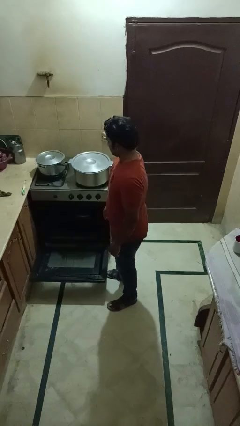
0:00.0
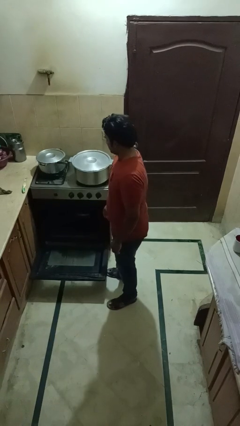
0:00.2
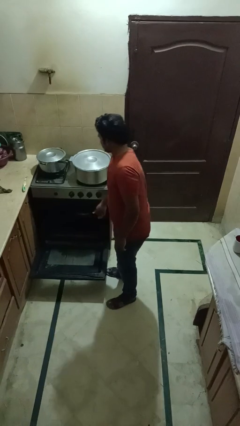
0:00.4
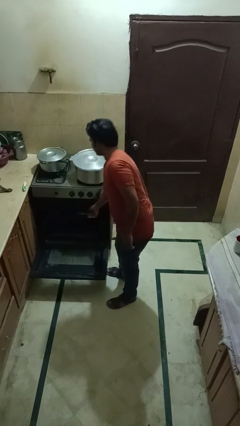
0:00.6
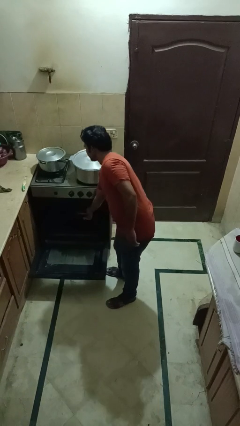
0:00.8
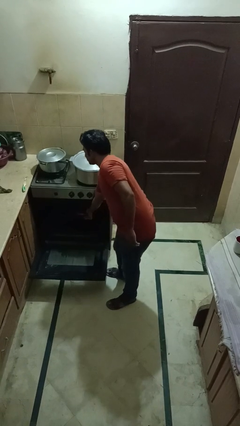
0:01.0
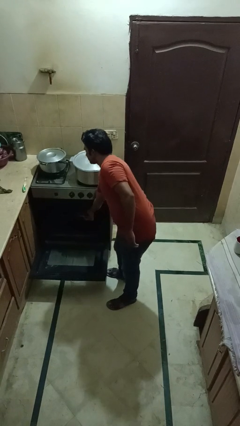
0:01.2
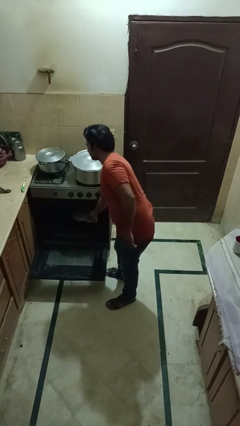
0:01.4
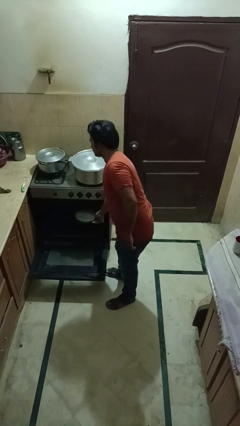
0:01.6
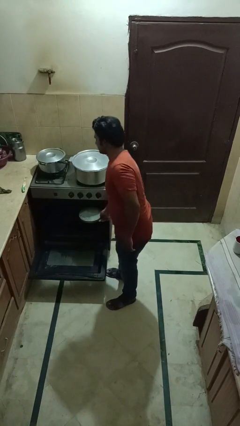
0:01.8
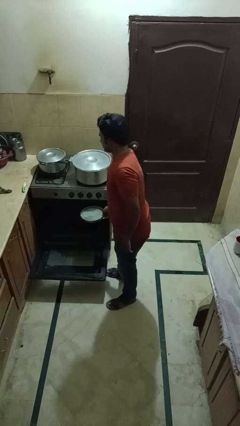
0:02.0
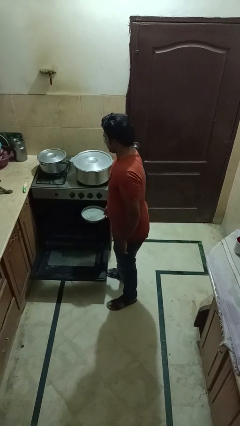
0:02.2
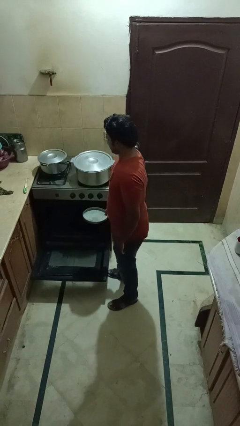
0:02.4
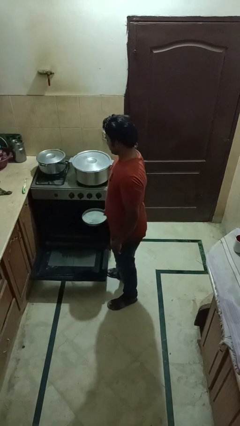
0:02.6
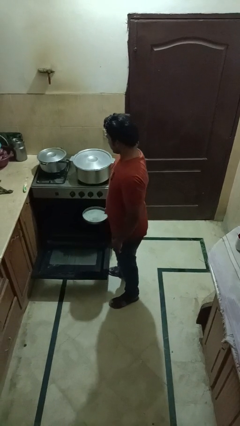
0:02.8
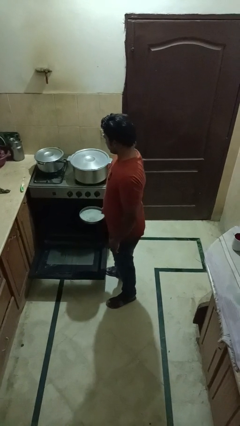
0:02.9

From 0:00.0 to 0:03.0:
person takes object from oven

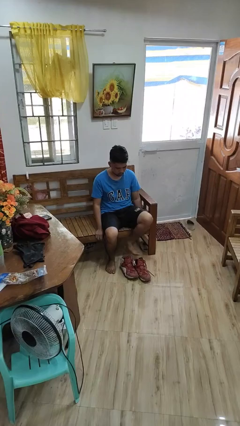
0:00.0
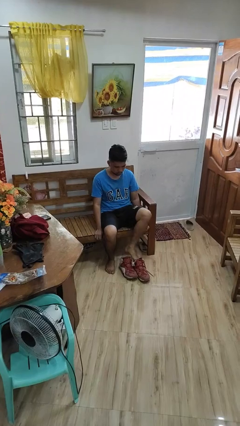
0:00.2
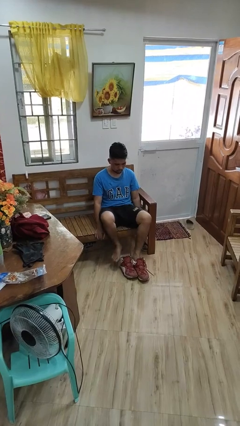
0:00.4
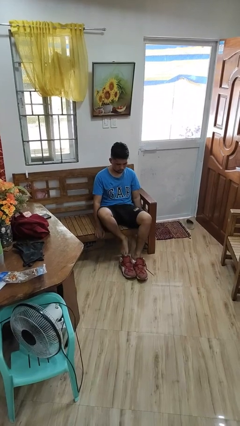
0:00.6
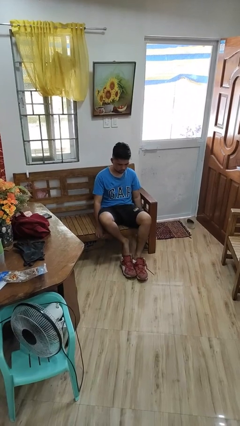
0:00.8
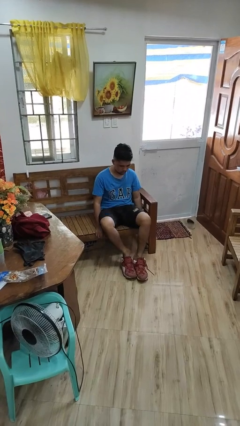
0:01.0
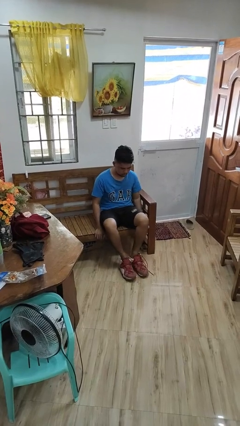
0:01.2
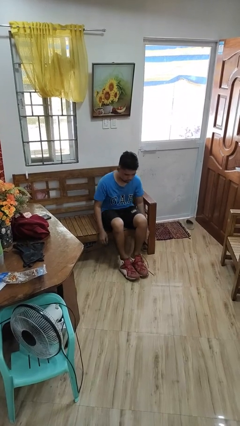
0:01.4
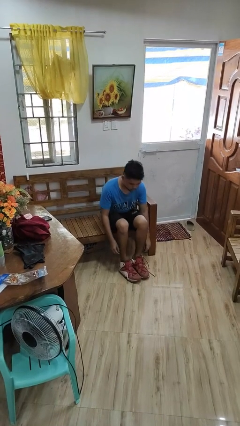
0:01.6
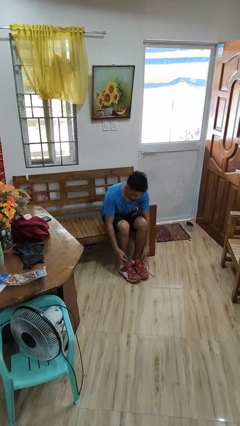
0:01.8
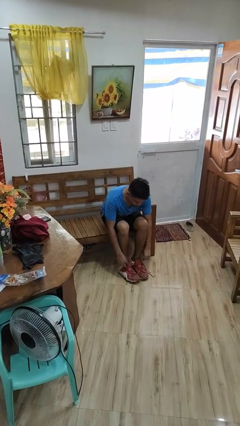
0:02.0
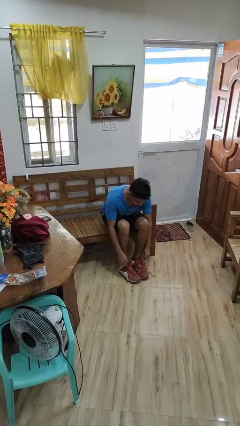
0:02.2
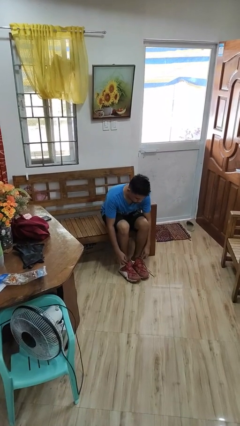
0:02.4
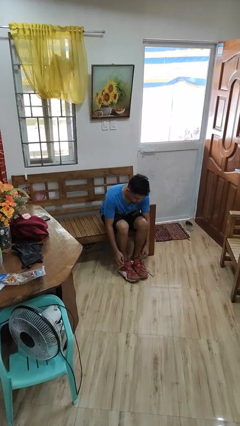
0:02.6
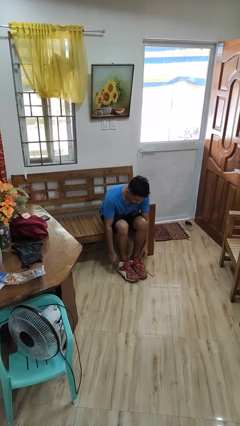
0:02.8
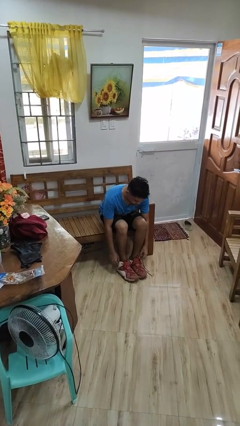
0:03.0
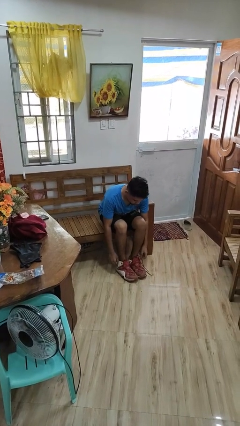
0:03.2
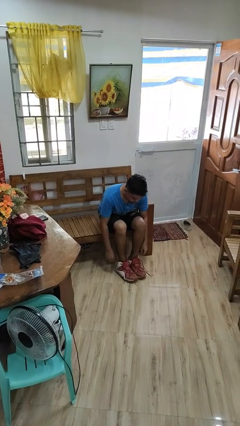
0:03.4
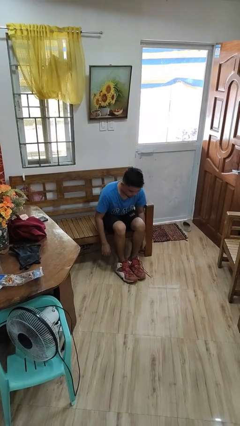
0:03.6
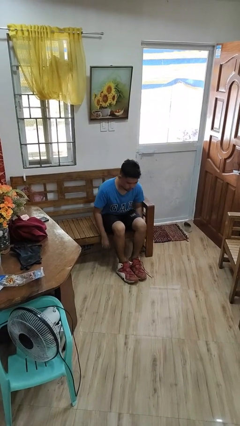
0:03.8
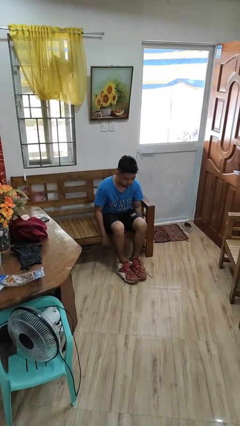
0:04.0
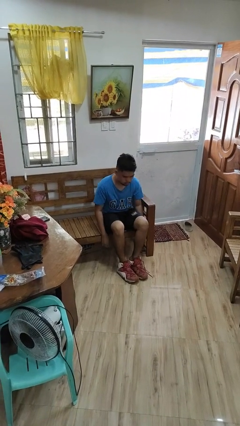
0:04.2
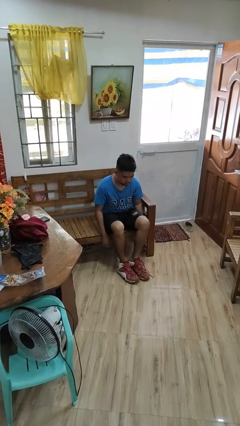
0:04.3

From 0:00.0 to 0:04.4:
person puts on shoes

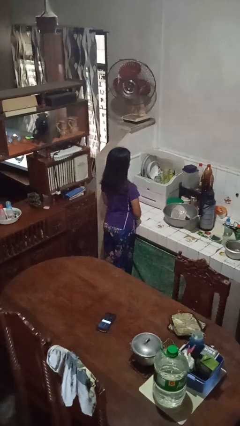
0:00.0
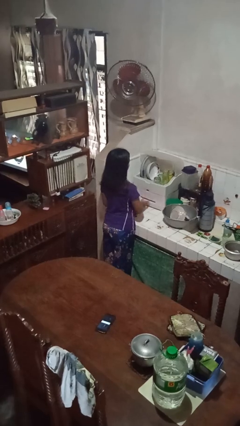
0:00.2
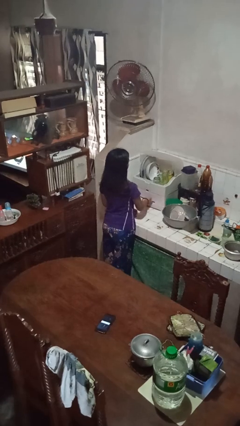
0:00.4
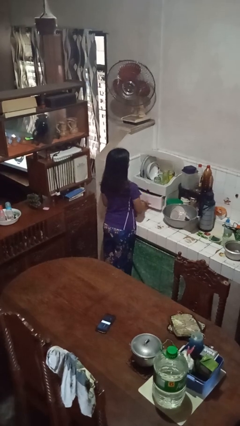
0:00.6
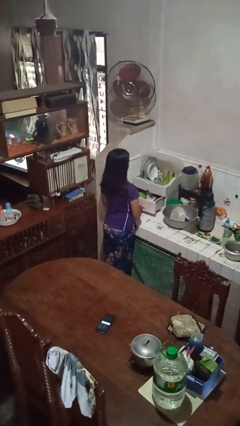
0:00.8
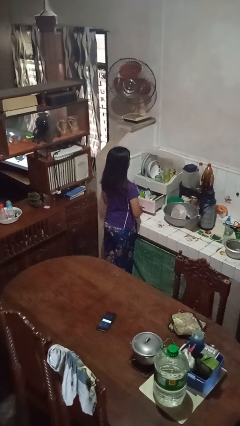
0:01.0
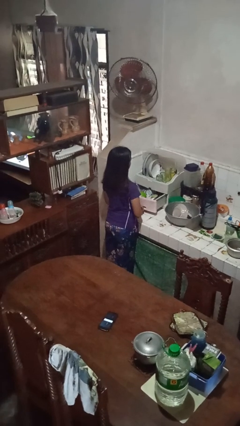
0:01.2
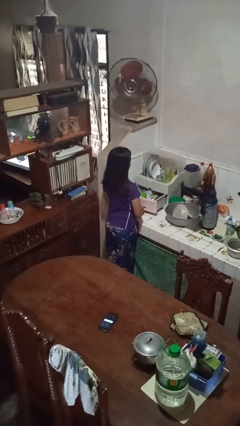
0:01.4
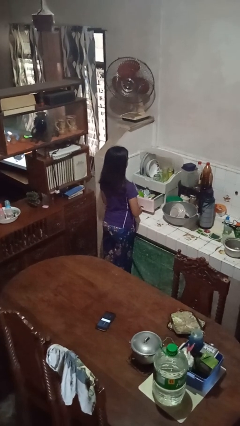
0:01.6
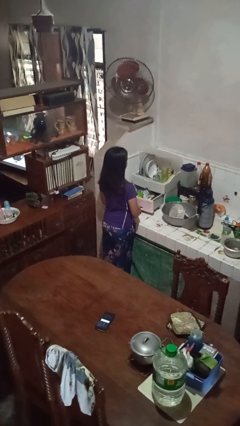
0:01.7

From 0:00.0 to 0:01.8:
person opens kitchen drawer

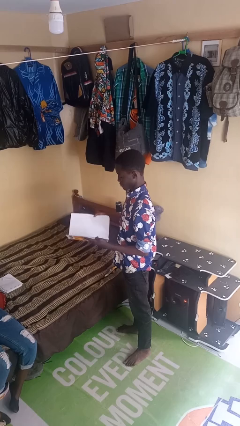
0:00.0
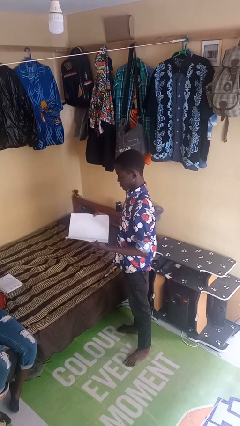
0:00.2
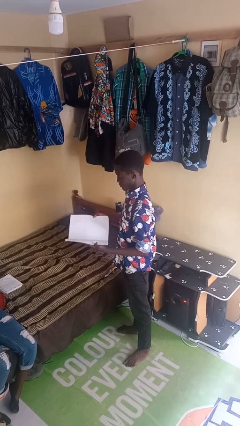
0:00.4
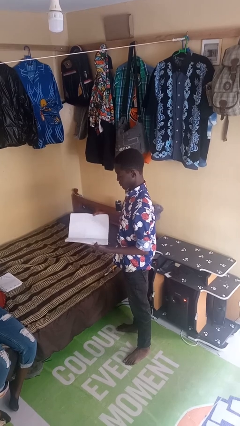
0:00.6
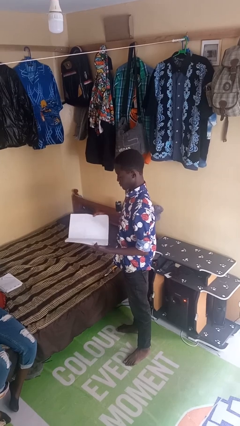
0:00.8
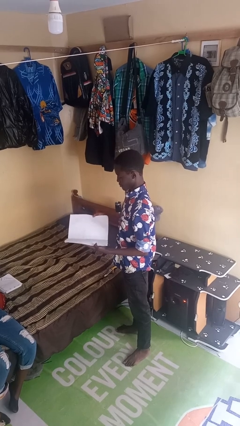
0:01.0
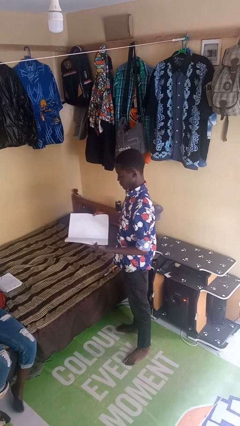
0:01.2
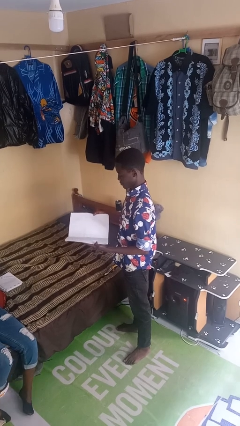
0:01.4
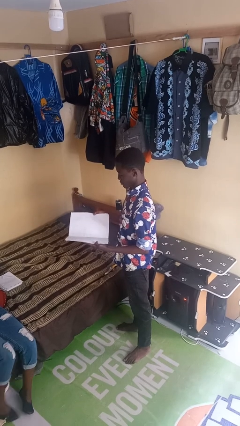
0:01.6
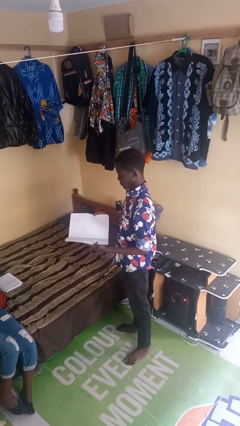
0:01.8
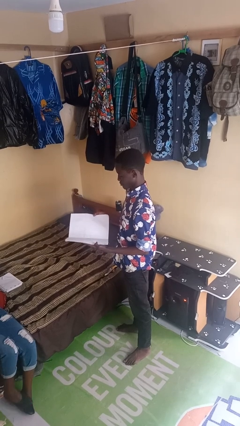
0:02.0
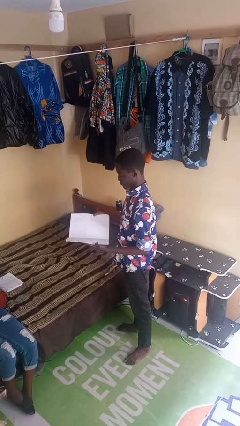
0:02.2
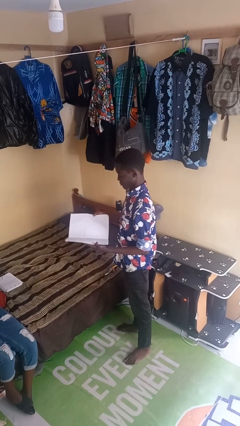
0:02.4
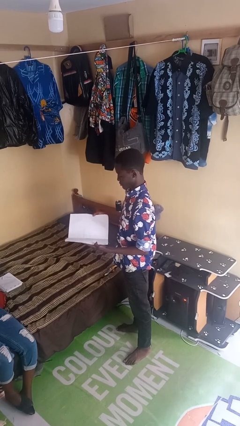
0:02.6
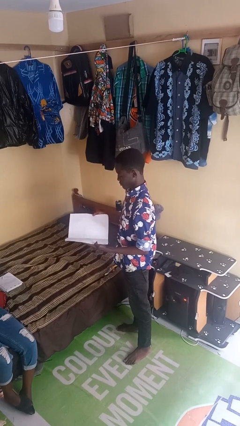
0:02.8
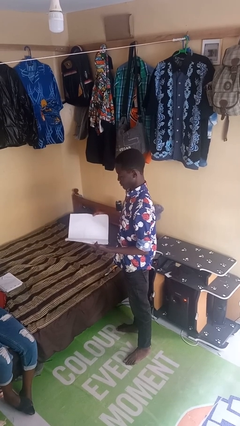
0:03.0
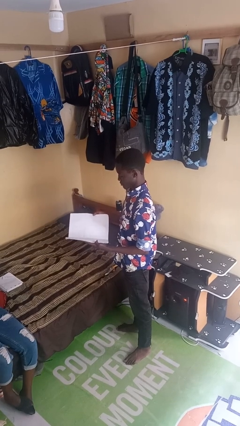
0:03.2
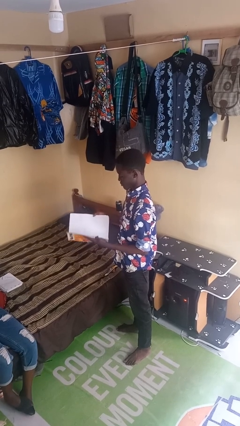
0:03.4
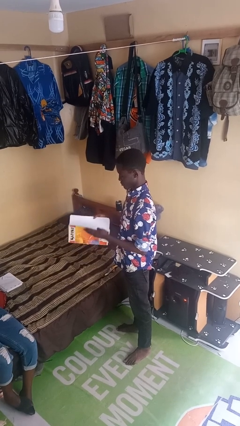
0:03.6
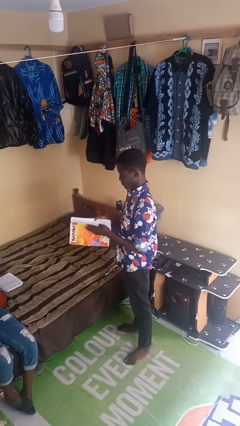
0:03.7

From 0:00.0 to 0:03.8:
person reads newspaper

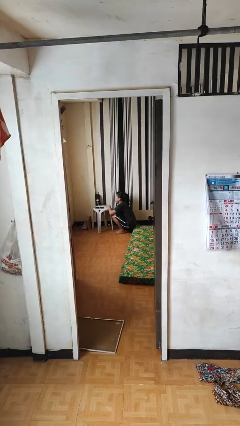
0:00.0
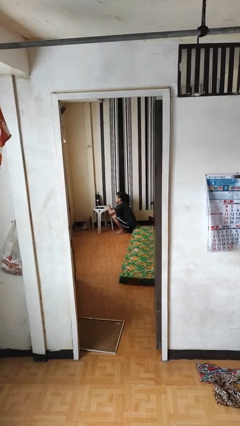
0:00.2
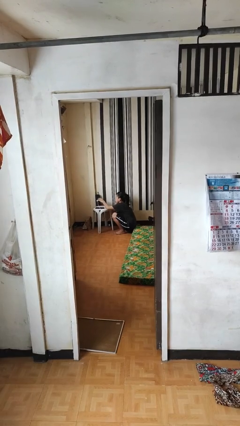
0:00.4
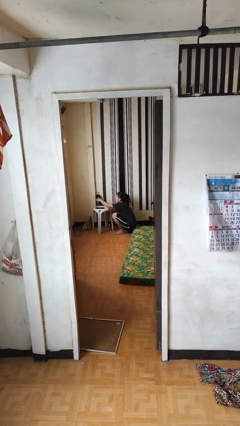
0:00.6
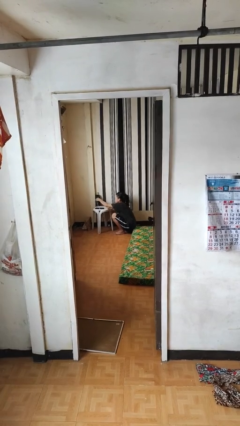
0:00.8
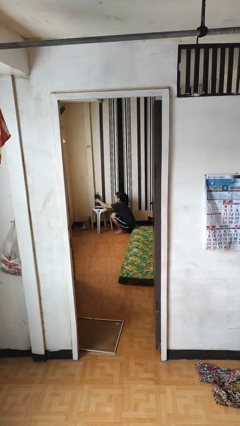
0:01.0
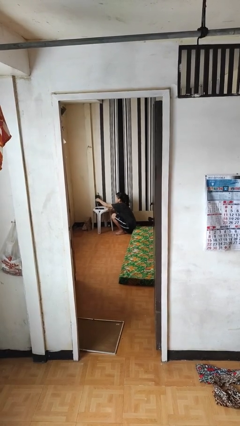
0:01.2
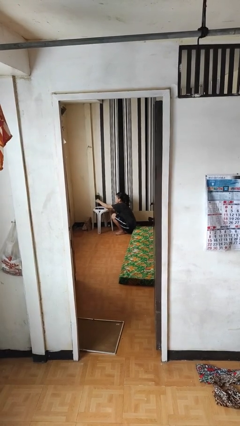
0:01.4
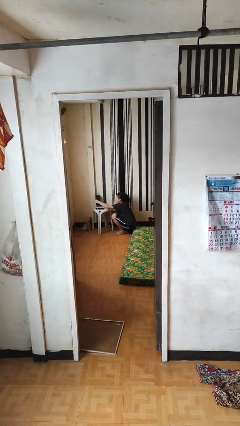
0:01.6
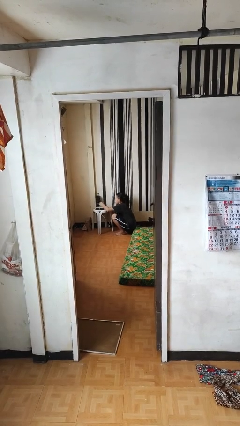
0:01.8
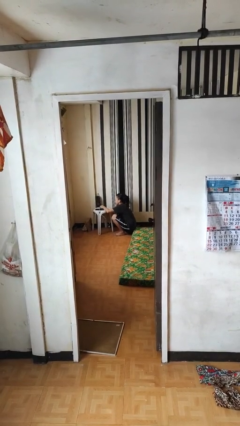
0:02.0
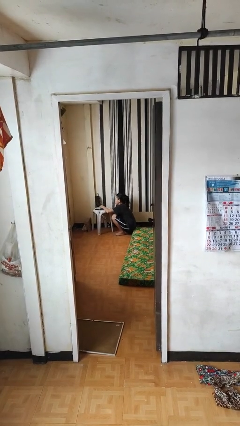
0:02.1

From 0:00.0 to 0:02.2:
person unplugs from electrical socket

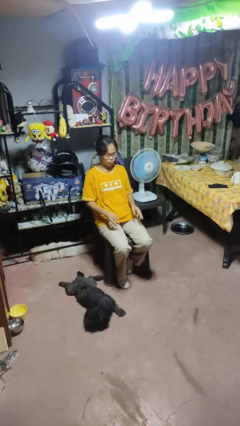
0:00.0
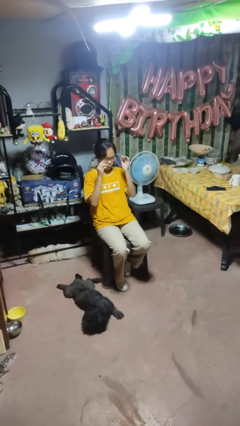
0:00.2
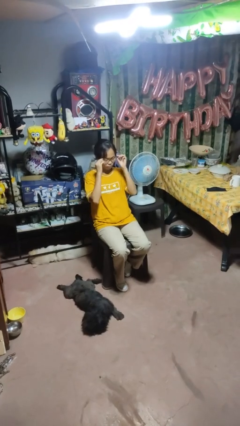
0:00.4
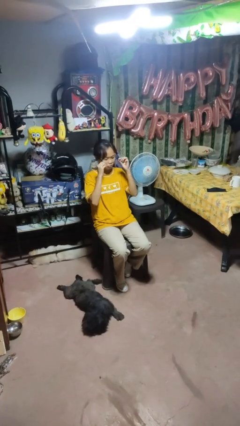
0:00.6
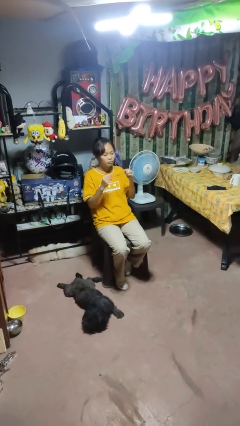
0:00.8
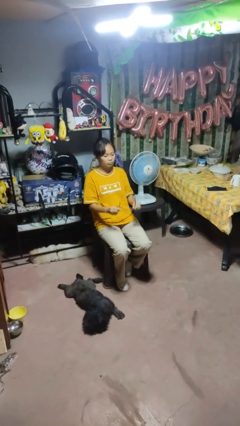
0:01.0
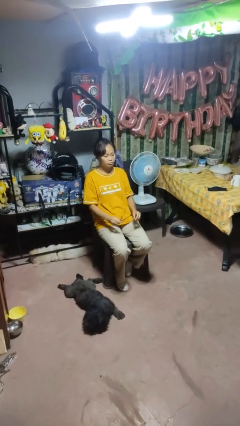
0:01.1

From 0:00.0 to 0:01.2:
person takes off glasses

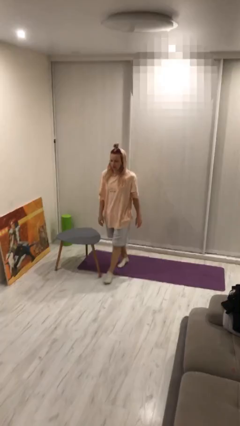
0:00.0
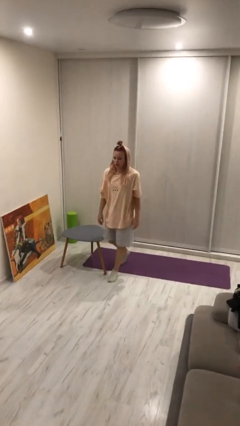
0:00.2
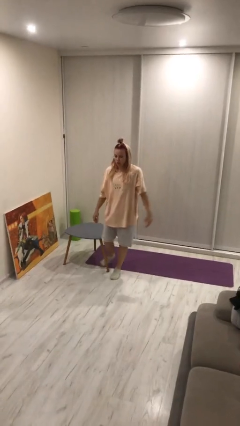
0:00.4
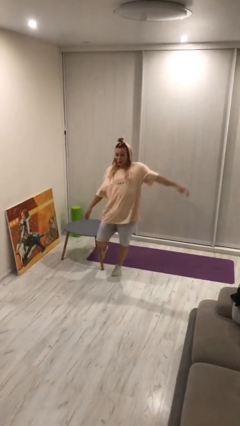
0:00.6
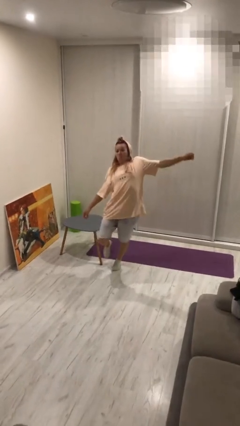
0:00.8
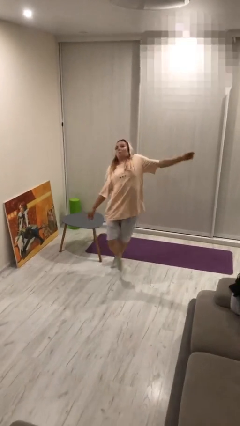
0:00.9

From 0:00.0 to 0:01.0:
person trips on object on floor
